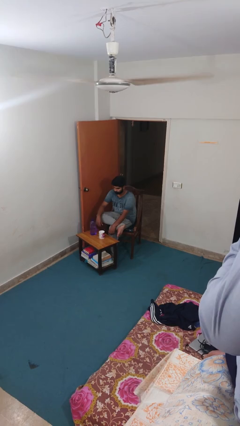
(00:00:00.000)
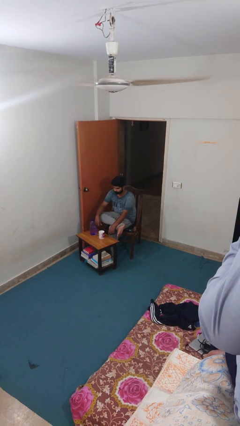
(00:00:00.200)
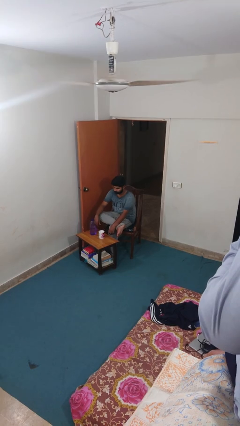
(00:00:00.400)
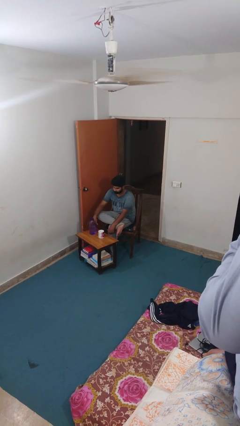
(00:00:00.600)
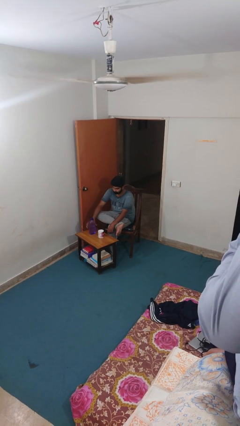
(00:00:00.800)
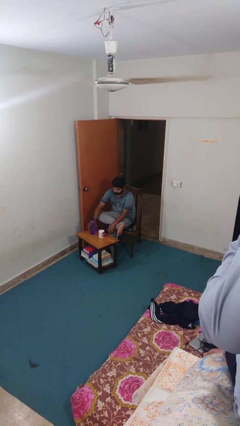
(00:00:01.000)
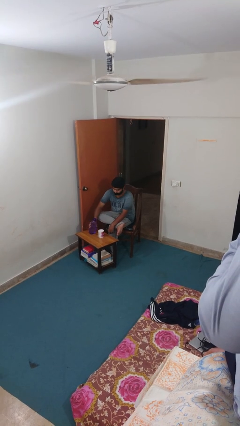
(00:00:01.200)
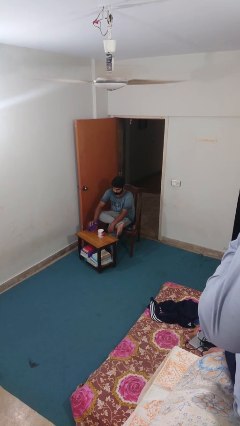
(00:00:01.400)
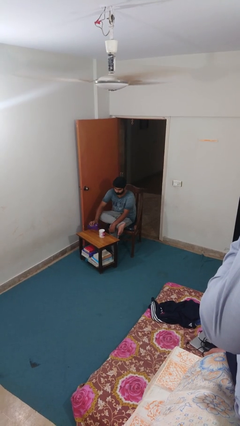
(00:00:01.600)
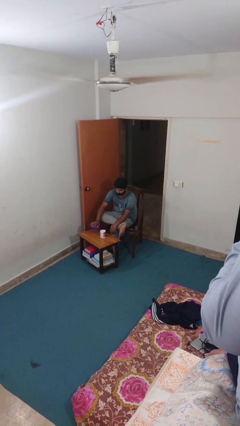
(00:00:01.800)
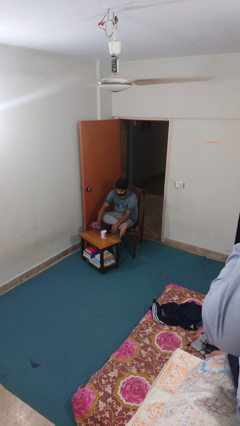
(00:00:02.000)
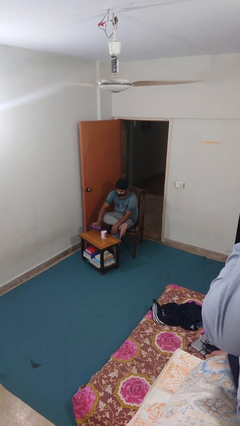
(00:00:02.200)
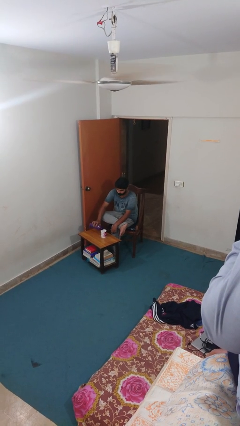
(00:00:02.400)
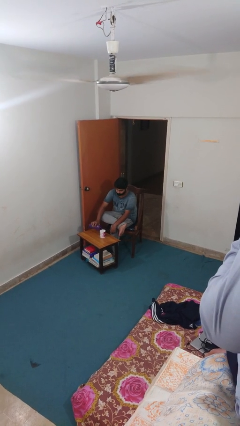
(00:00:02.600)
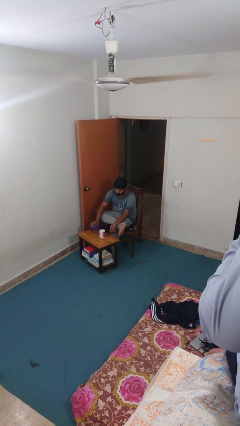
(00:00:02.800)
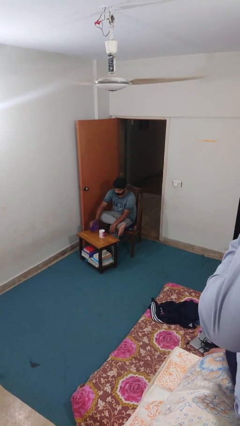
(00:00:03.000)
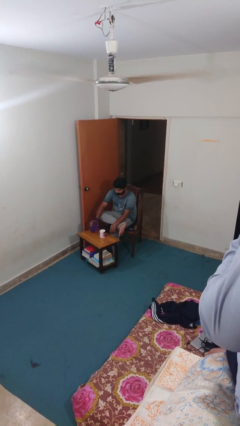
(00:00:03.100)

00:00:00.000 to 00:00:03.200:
person pours liquid into cup

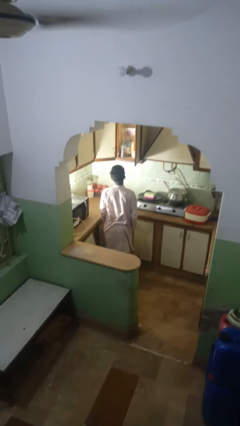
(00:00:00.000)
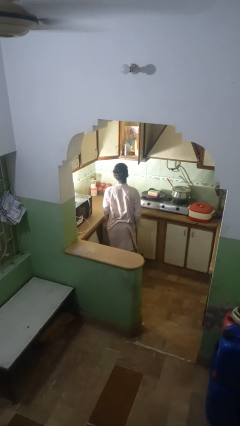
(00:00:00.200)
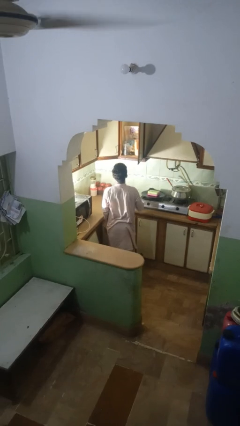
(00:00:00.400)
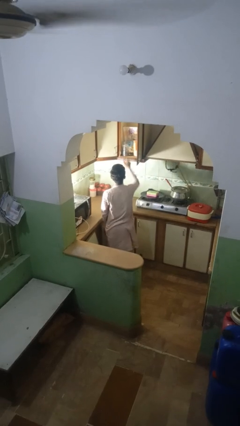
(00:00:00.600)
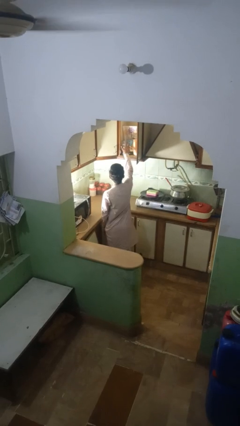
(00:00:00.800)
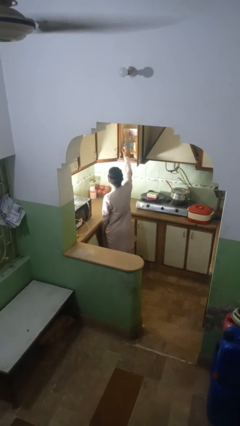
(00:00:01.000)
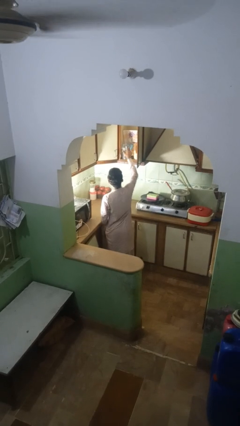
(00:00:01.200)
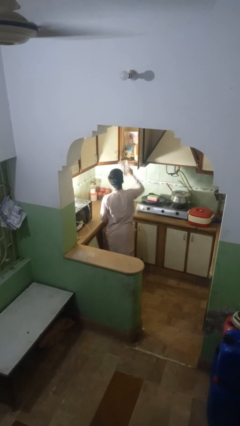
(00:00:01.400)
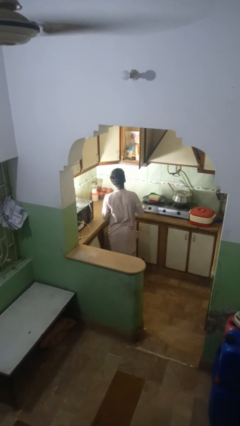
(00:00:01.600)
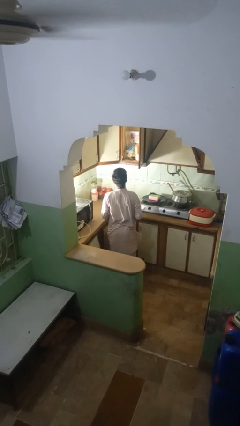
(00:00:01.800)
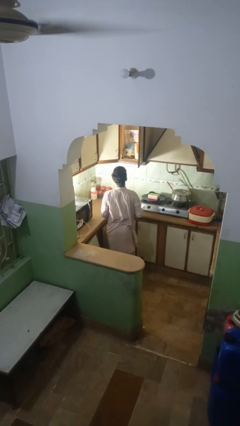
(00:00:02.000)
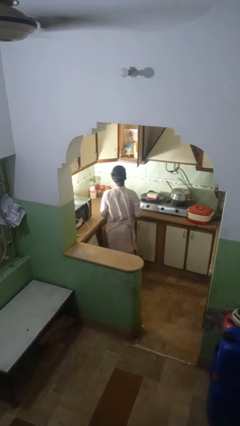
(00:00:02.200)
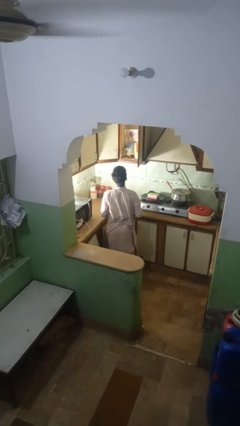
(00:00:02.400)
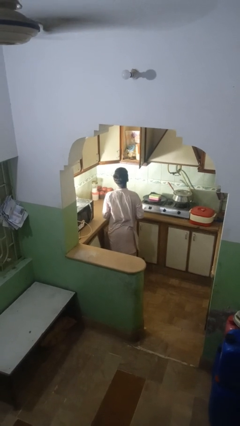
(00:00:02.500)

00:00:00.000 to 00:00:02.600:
person takes object from kitchen drawer

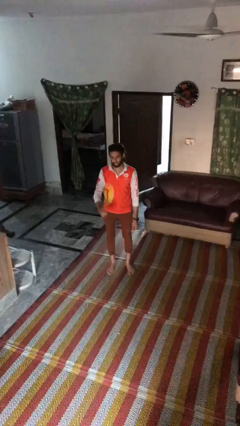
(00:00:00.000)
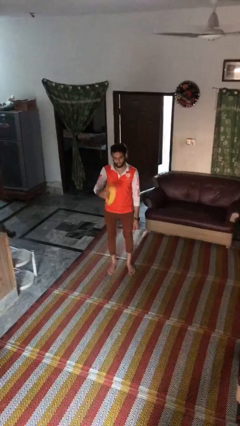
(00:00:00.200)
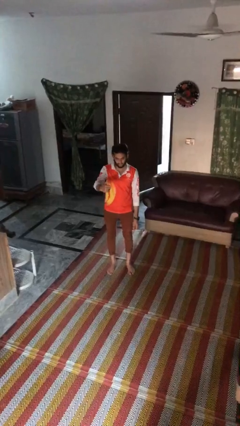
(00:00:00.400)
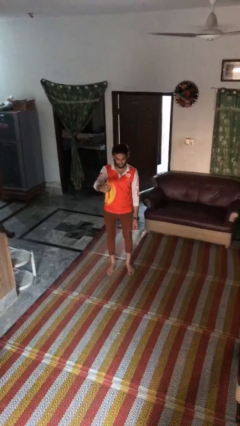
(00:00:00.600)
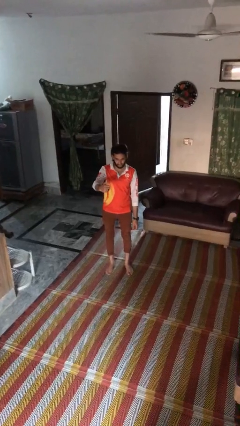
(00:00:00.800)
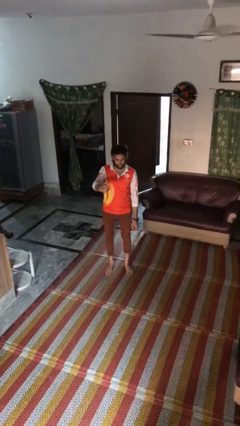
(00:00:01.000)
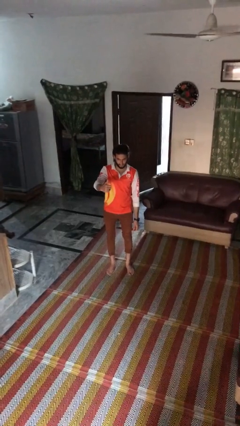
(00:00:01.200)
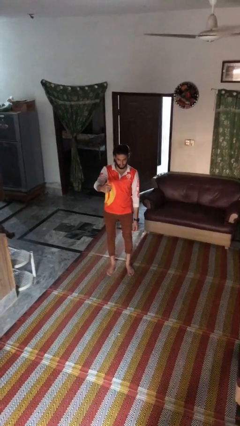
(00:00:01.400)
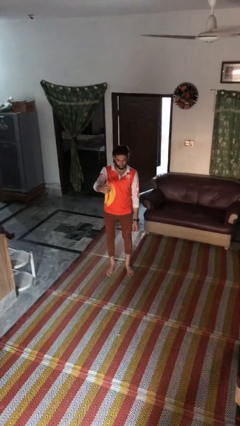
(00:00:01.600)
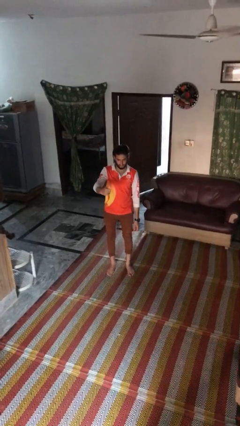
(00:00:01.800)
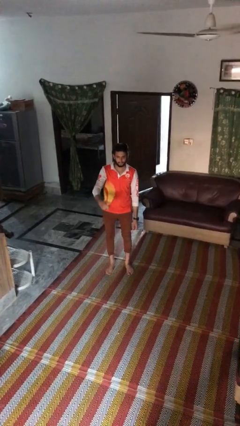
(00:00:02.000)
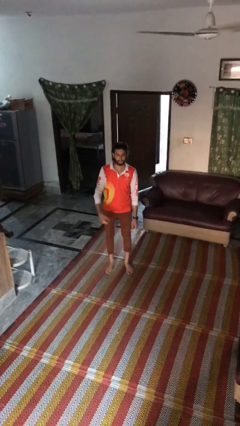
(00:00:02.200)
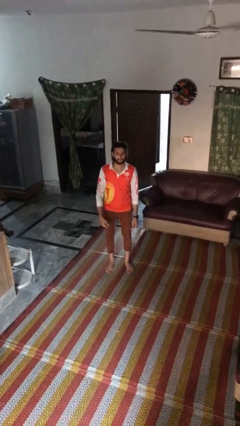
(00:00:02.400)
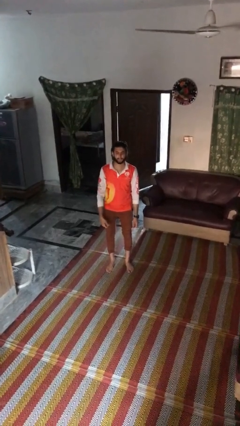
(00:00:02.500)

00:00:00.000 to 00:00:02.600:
person gestures thumbs up

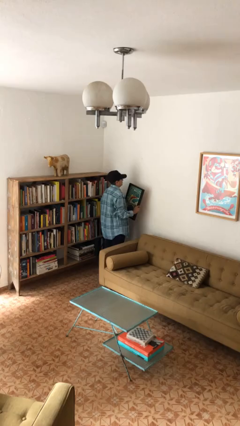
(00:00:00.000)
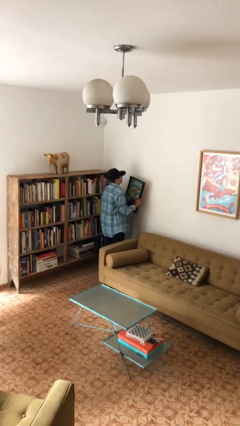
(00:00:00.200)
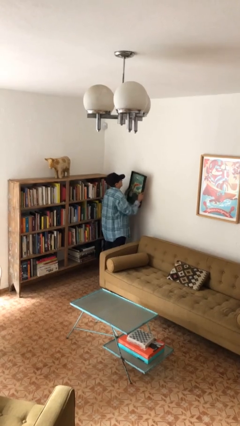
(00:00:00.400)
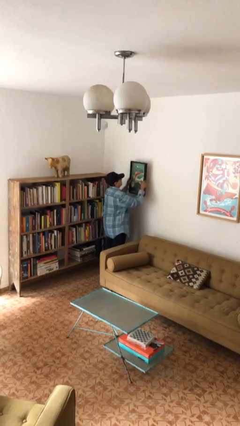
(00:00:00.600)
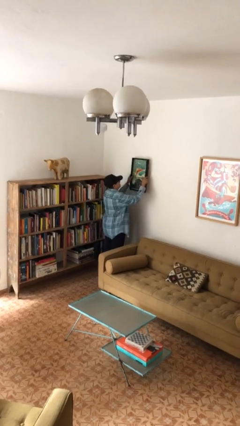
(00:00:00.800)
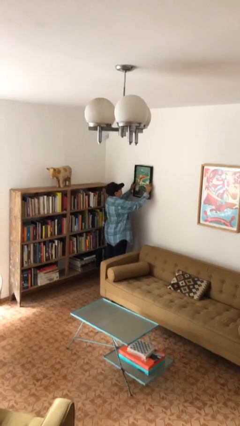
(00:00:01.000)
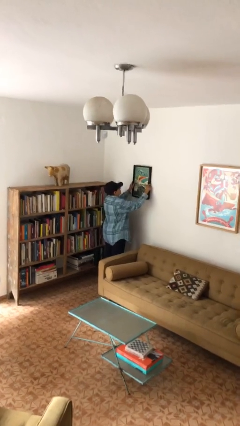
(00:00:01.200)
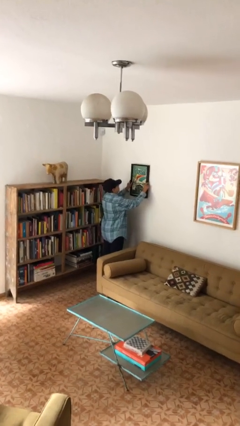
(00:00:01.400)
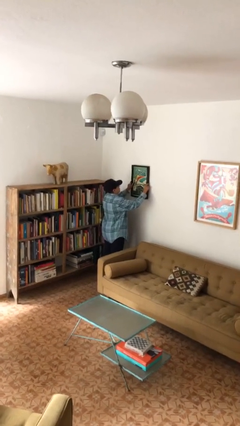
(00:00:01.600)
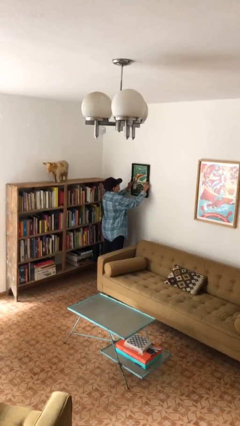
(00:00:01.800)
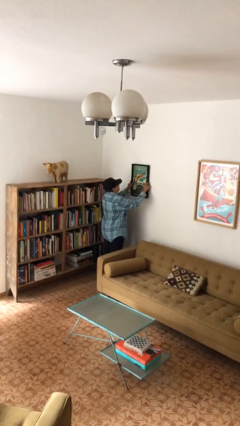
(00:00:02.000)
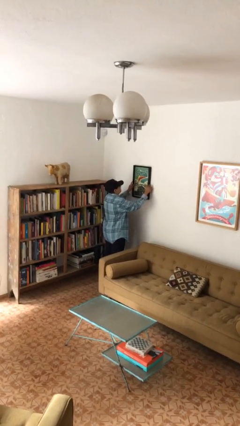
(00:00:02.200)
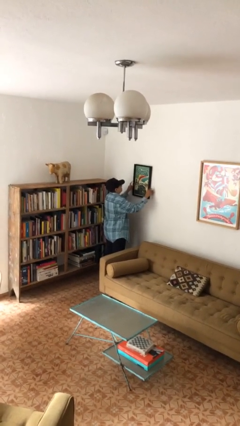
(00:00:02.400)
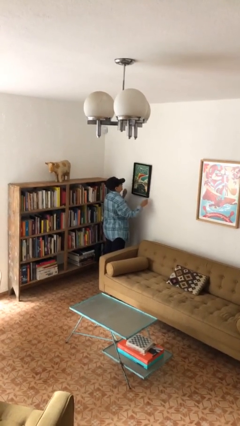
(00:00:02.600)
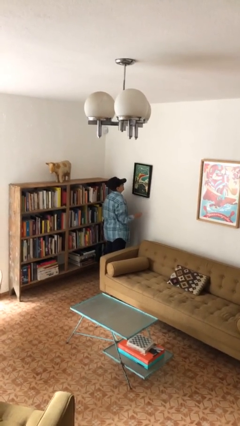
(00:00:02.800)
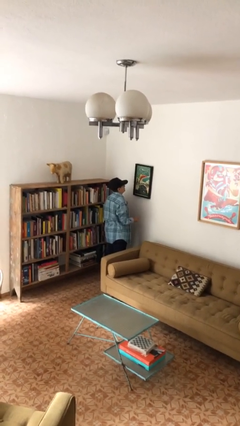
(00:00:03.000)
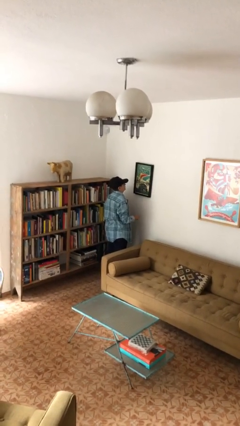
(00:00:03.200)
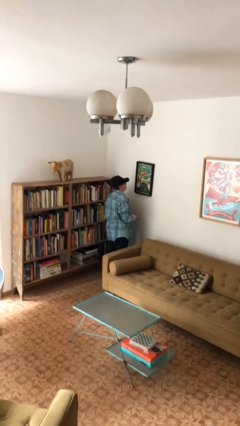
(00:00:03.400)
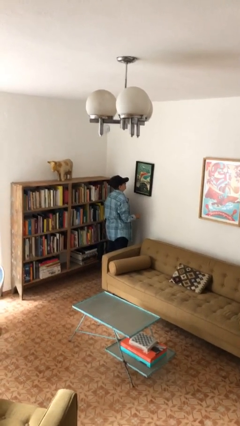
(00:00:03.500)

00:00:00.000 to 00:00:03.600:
person puts up picture frame

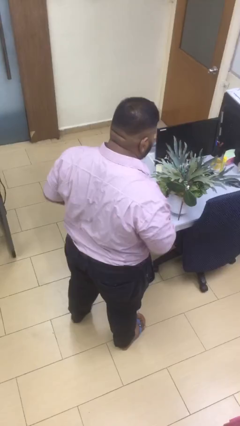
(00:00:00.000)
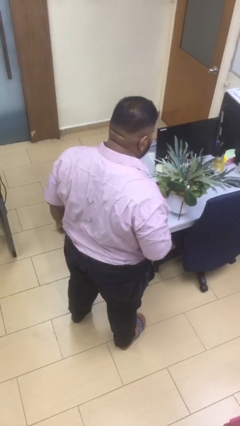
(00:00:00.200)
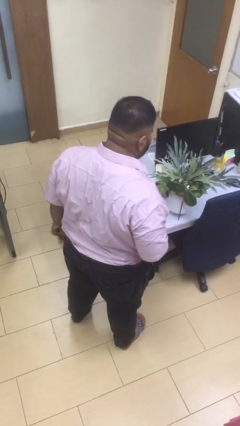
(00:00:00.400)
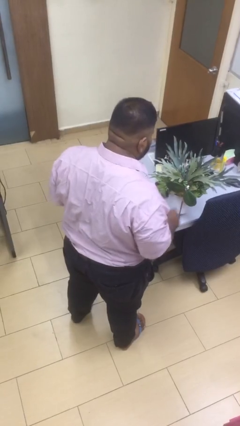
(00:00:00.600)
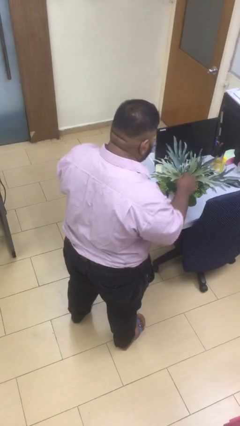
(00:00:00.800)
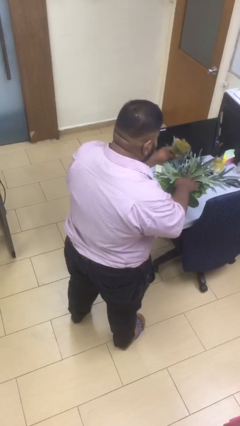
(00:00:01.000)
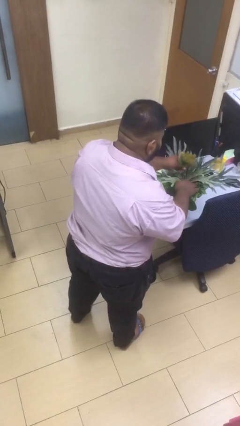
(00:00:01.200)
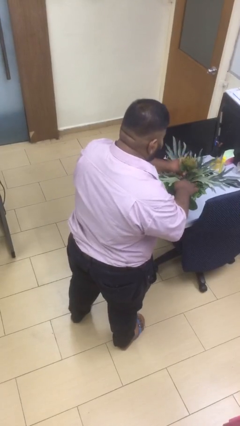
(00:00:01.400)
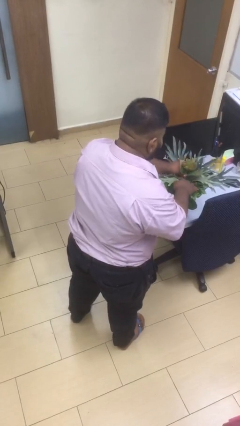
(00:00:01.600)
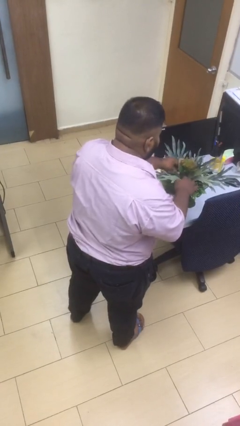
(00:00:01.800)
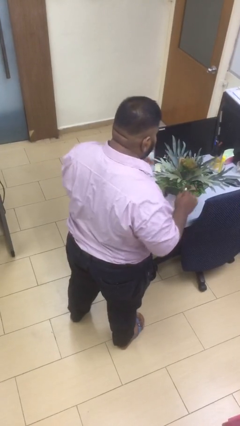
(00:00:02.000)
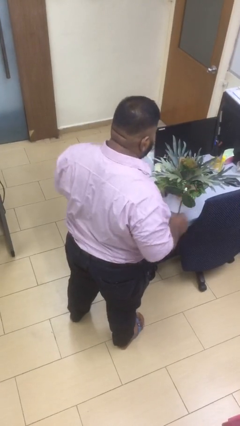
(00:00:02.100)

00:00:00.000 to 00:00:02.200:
person arranges flowers in vase

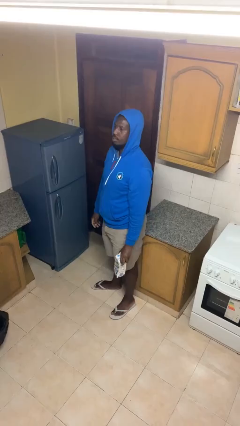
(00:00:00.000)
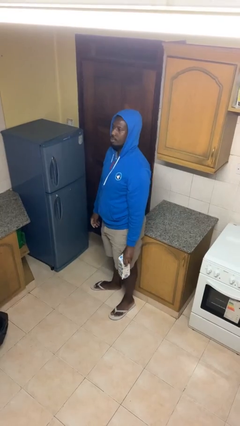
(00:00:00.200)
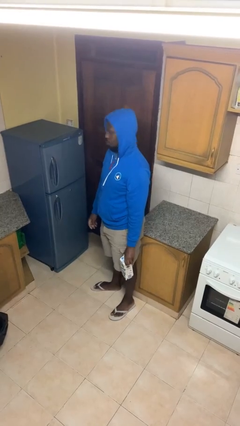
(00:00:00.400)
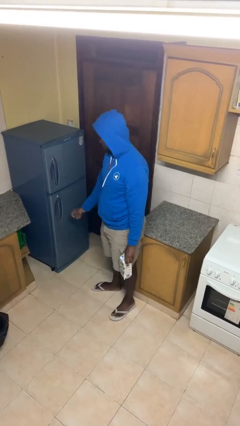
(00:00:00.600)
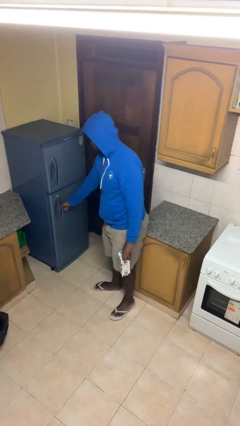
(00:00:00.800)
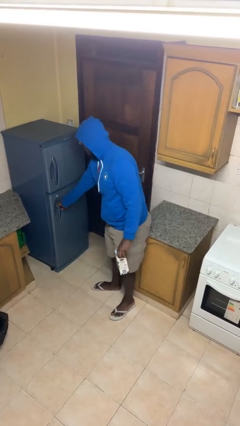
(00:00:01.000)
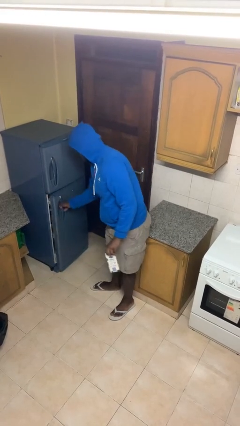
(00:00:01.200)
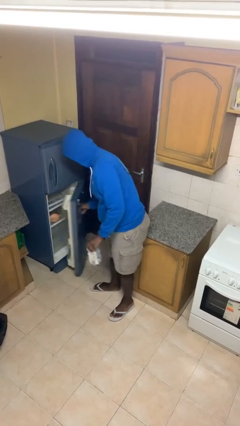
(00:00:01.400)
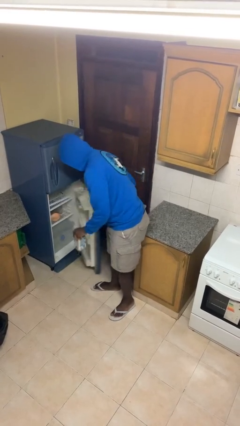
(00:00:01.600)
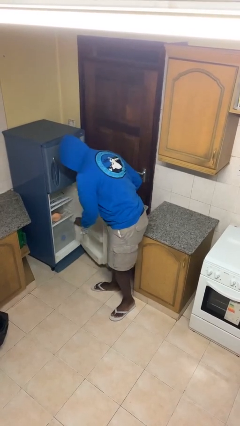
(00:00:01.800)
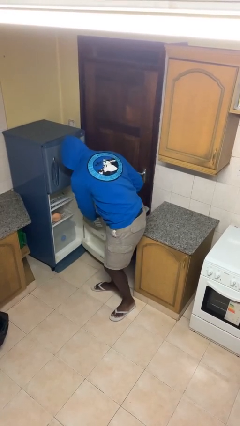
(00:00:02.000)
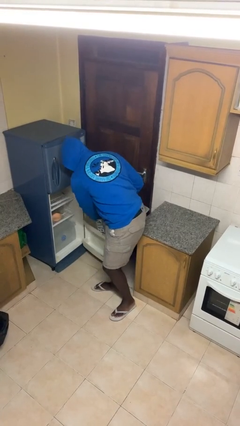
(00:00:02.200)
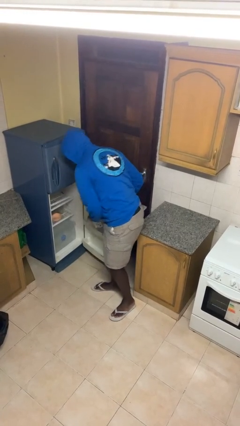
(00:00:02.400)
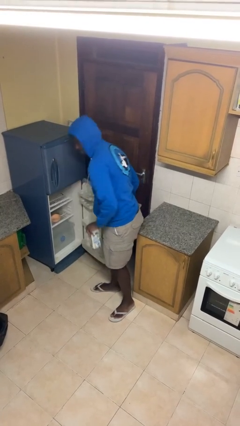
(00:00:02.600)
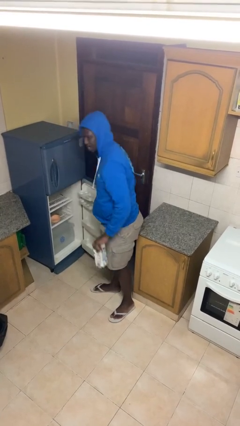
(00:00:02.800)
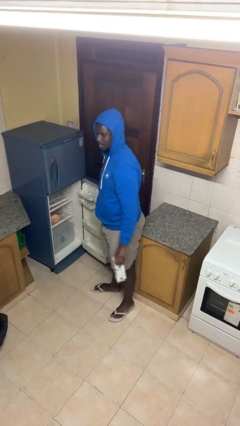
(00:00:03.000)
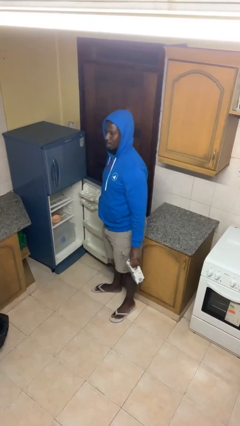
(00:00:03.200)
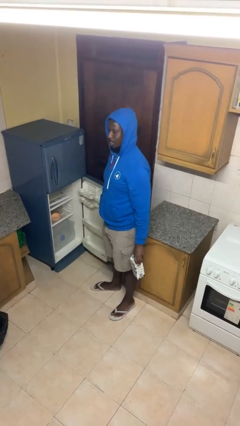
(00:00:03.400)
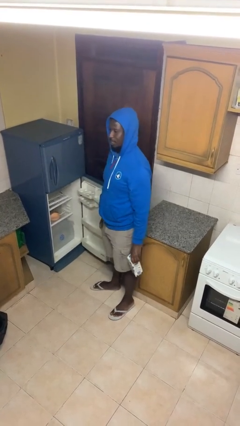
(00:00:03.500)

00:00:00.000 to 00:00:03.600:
person opens refrigerator
